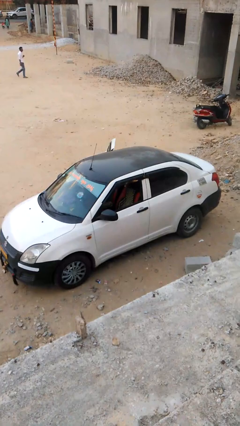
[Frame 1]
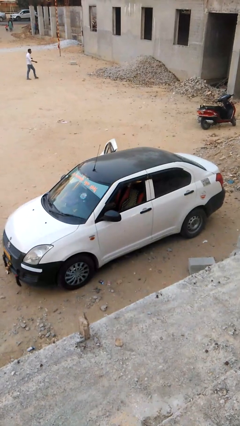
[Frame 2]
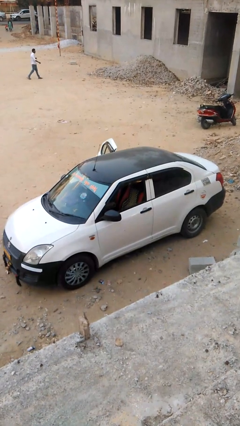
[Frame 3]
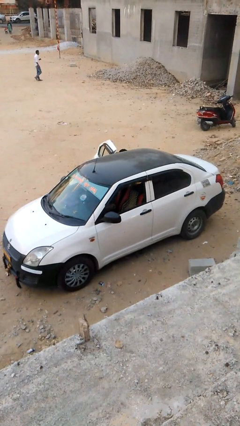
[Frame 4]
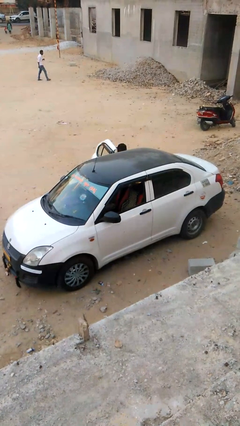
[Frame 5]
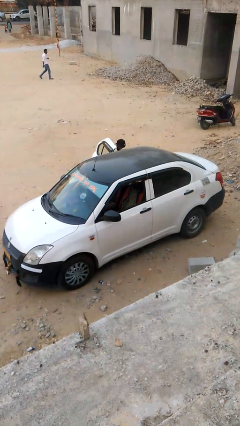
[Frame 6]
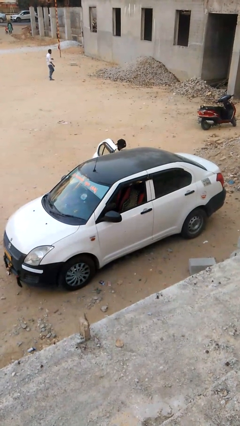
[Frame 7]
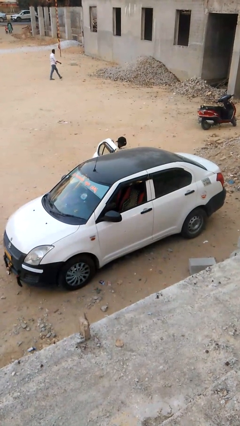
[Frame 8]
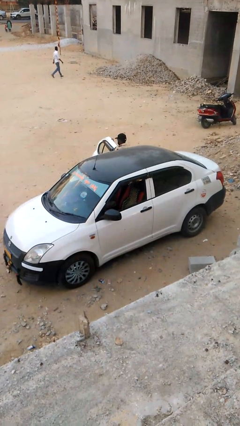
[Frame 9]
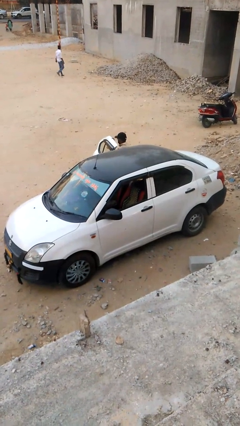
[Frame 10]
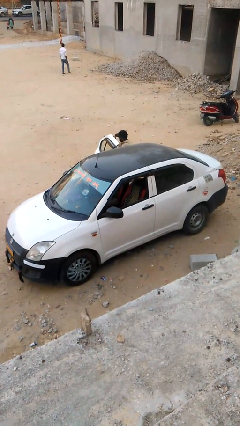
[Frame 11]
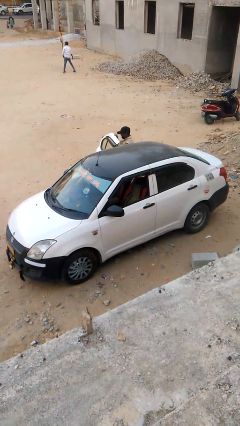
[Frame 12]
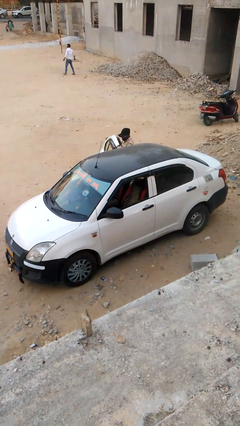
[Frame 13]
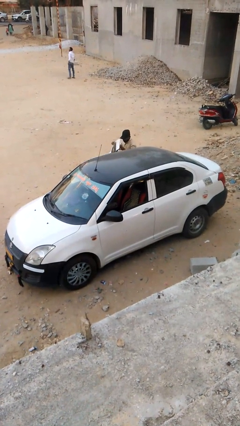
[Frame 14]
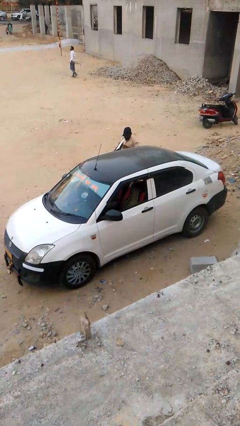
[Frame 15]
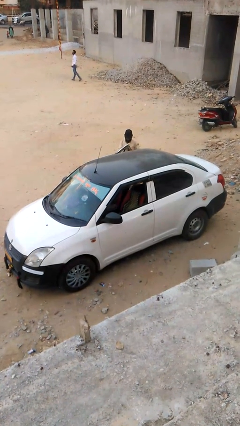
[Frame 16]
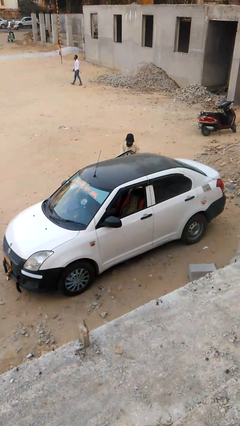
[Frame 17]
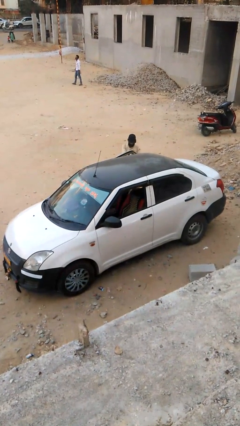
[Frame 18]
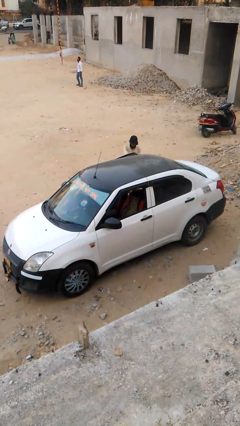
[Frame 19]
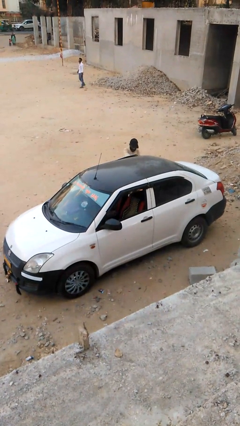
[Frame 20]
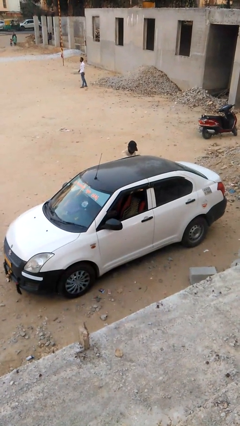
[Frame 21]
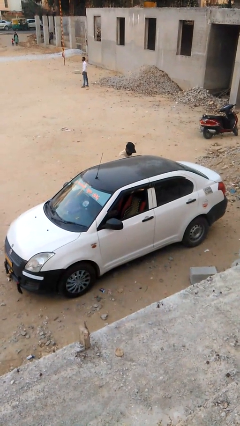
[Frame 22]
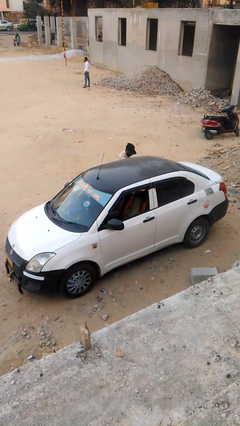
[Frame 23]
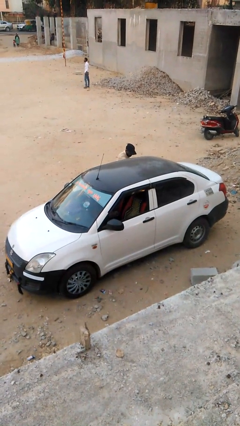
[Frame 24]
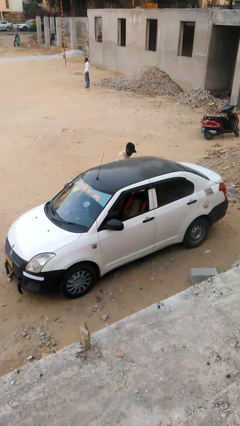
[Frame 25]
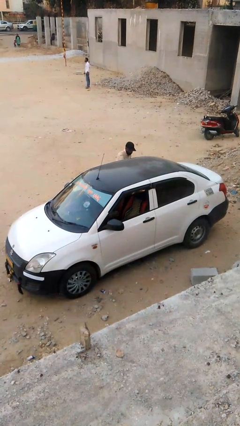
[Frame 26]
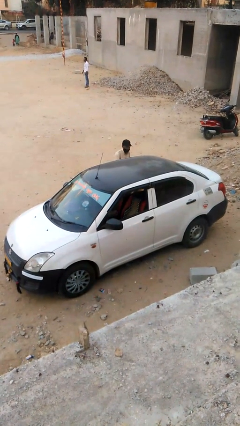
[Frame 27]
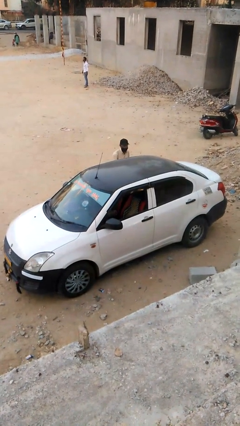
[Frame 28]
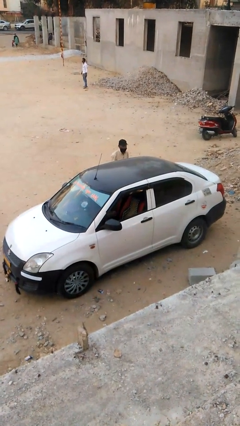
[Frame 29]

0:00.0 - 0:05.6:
car drops off person

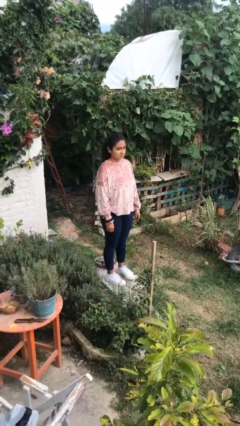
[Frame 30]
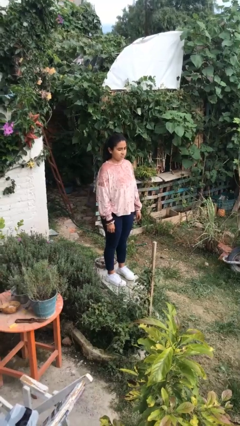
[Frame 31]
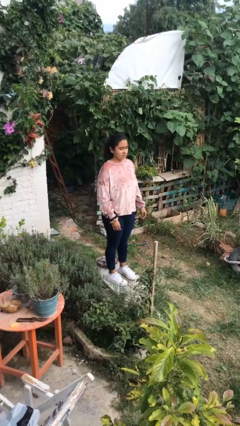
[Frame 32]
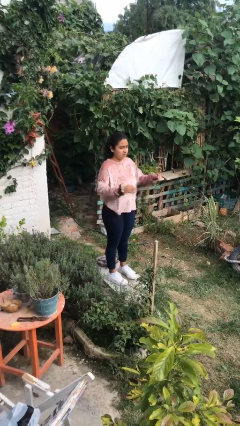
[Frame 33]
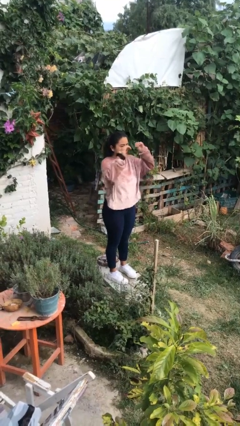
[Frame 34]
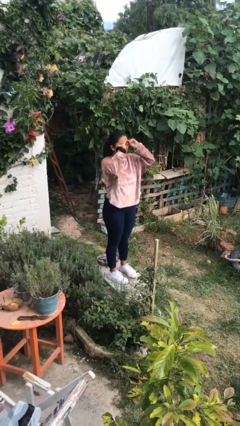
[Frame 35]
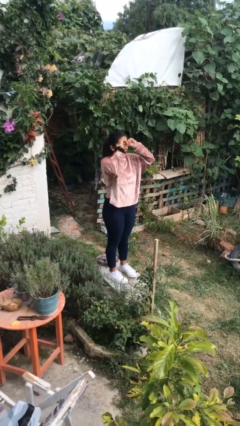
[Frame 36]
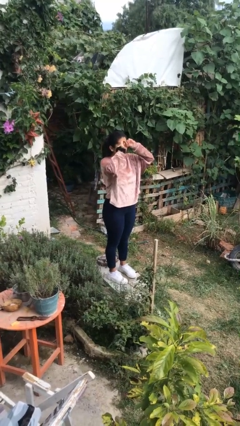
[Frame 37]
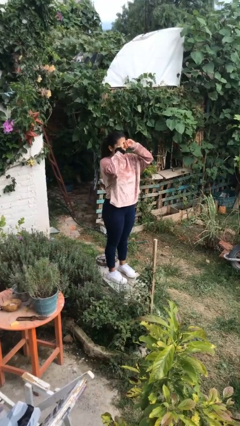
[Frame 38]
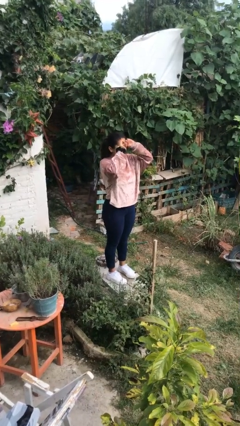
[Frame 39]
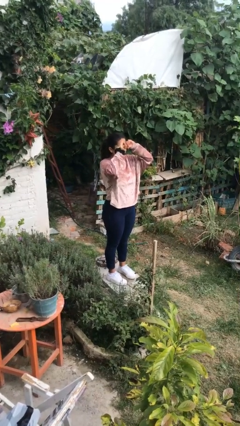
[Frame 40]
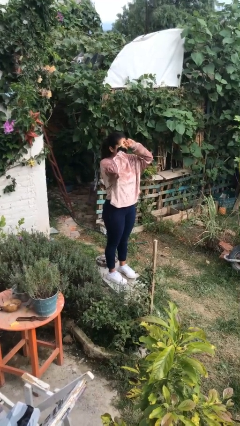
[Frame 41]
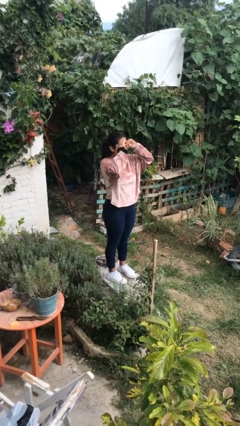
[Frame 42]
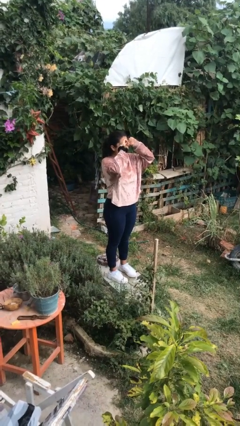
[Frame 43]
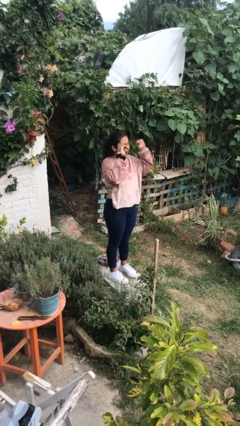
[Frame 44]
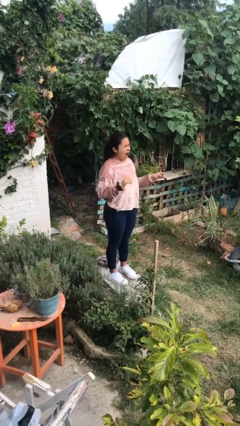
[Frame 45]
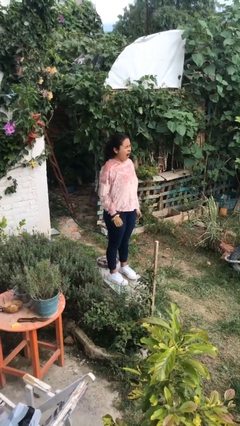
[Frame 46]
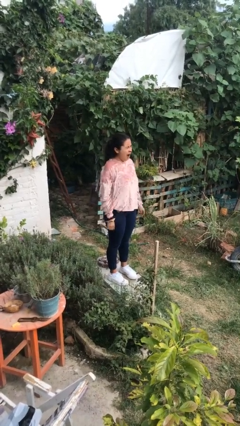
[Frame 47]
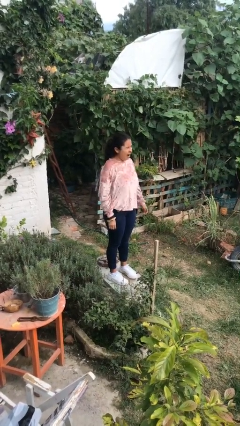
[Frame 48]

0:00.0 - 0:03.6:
person rubs eyes

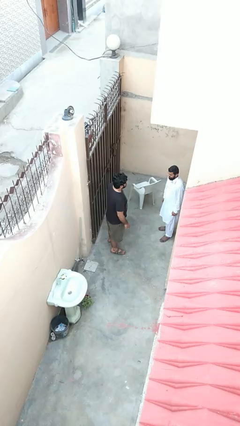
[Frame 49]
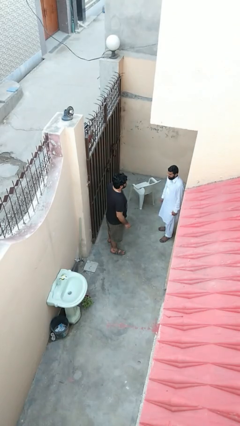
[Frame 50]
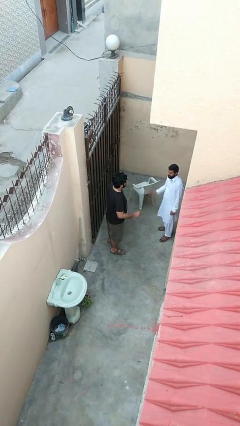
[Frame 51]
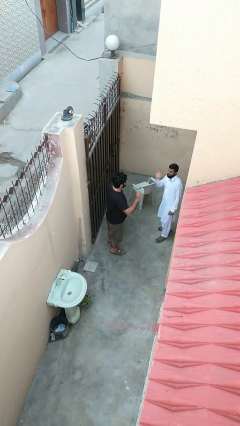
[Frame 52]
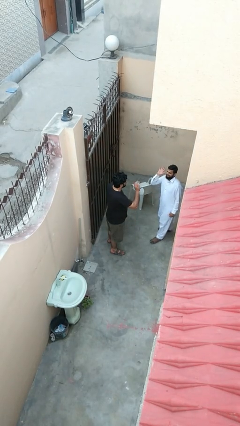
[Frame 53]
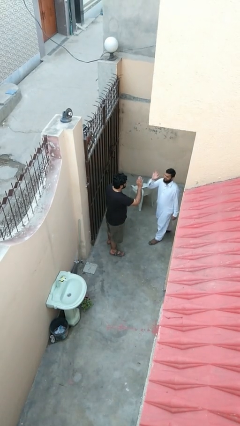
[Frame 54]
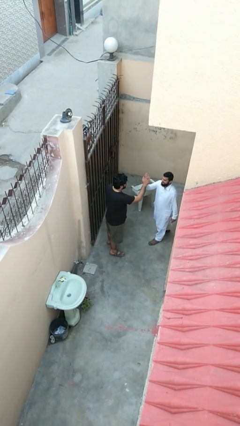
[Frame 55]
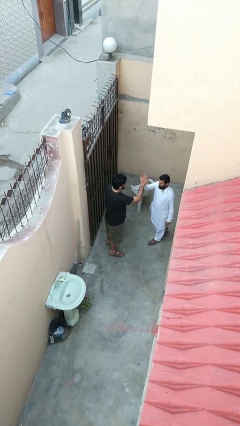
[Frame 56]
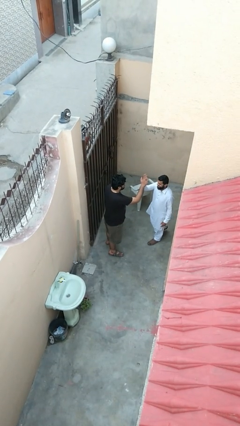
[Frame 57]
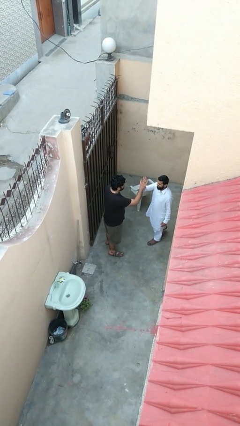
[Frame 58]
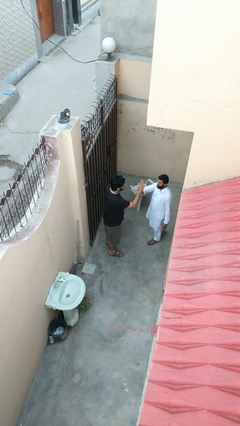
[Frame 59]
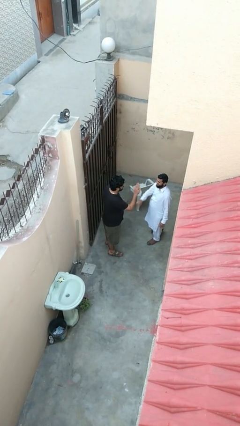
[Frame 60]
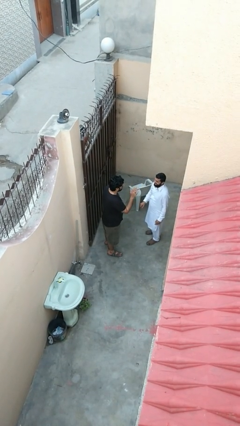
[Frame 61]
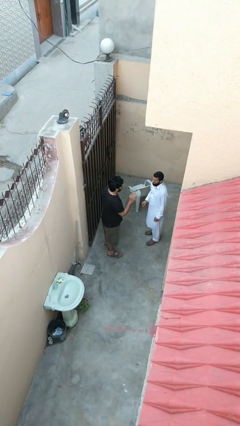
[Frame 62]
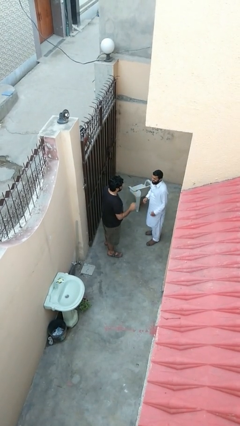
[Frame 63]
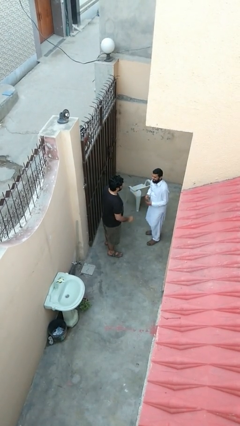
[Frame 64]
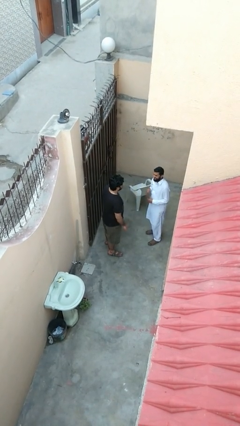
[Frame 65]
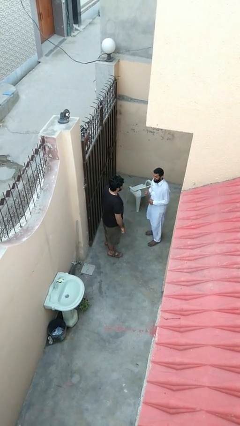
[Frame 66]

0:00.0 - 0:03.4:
person highfives hand

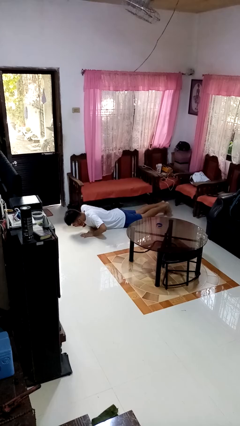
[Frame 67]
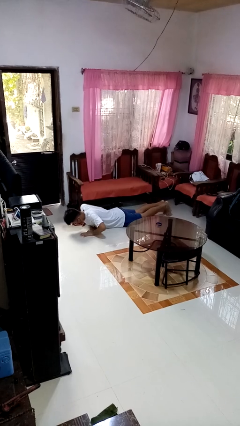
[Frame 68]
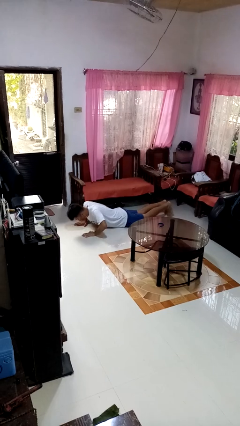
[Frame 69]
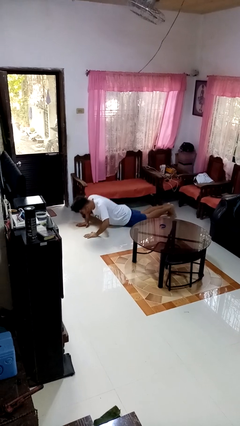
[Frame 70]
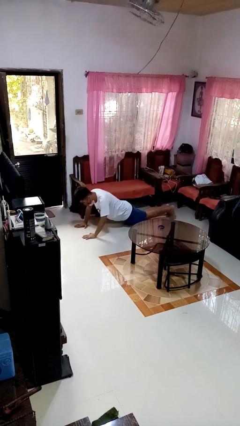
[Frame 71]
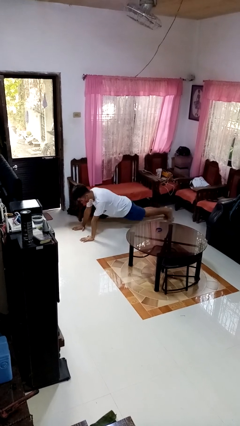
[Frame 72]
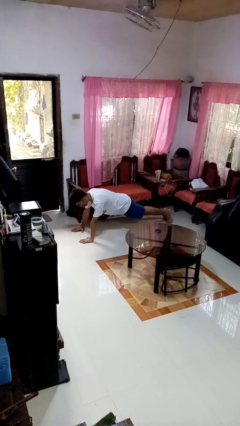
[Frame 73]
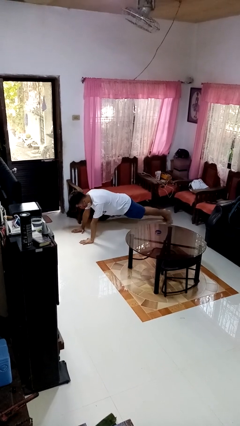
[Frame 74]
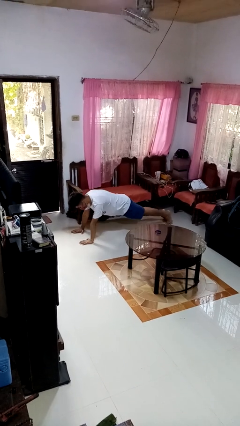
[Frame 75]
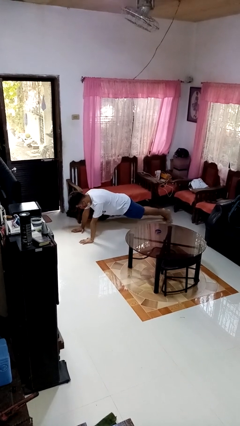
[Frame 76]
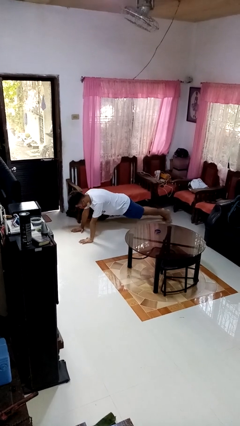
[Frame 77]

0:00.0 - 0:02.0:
person exercises with pushup

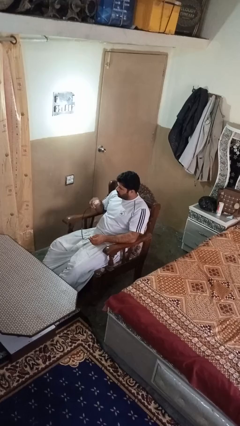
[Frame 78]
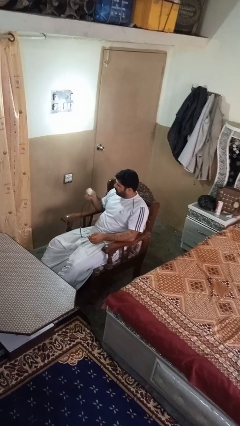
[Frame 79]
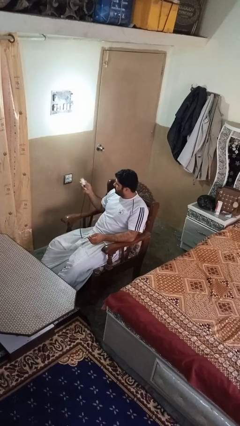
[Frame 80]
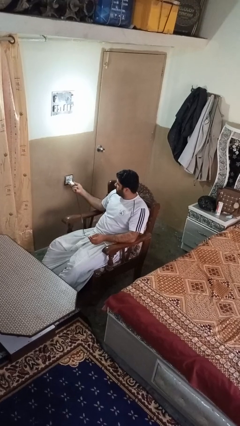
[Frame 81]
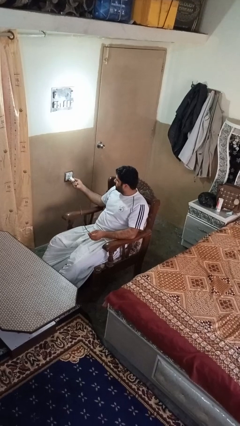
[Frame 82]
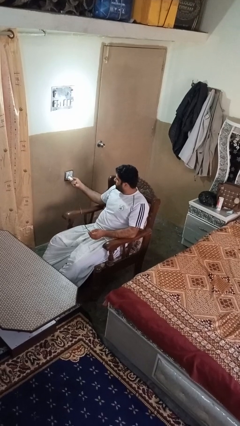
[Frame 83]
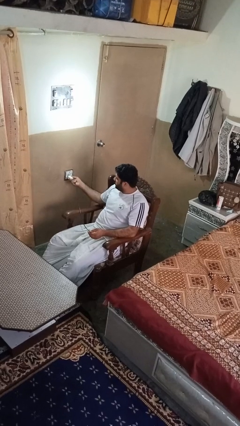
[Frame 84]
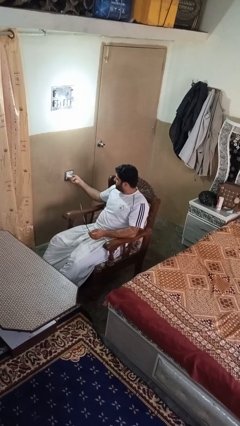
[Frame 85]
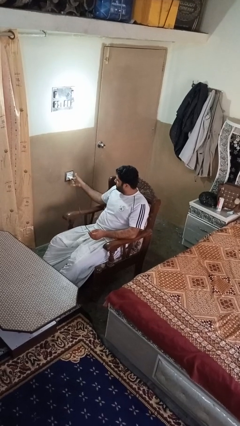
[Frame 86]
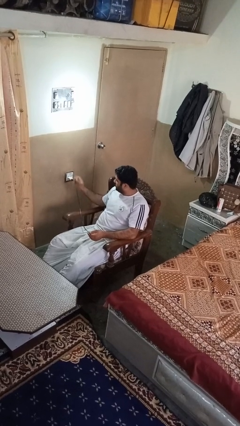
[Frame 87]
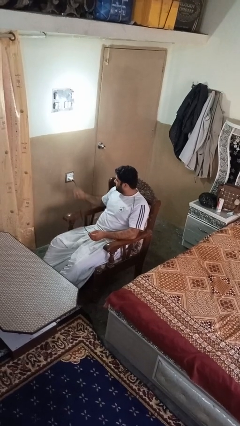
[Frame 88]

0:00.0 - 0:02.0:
person plugs into electrical socket

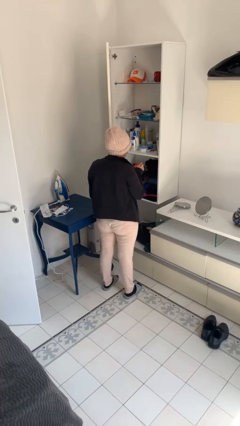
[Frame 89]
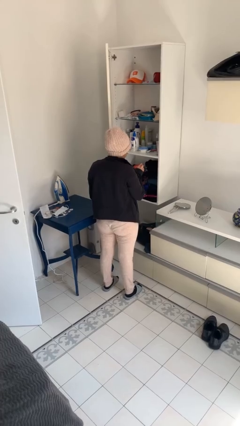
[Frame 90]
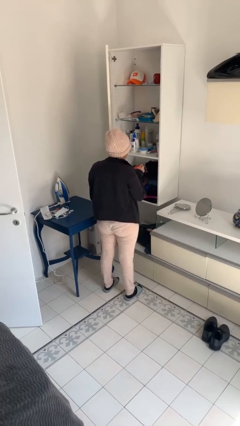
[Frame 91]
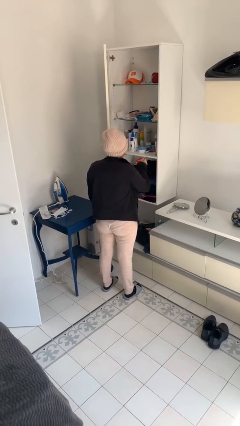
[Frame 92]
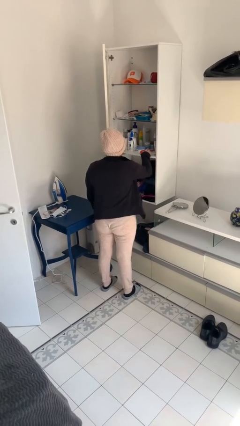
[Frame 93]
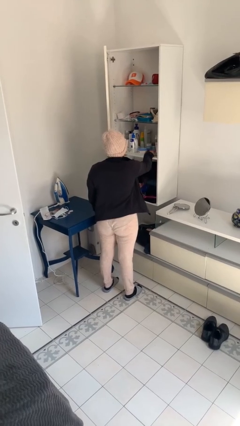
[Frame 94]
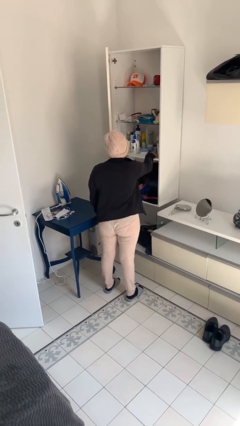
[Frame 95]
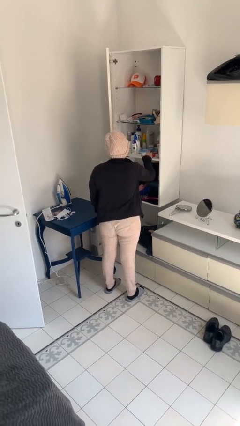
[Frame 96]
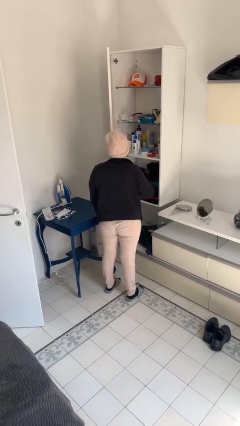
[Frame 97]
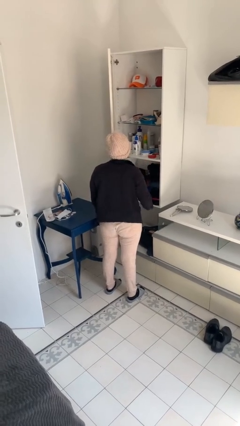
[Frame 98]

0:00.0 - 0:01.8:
person puts down object on shelf
